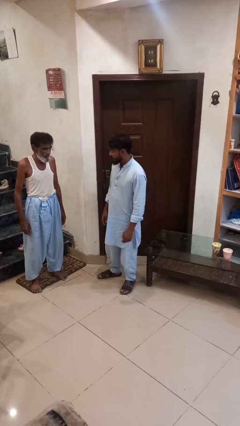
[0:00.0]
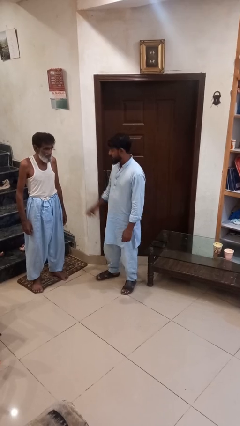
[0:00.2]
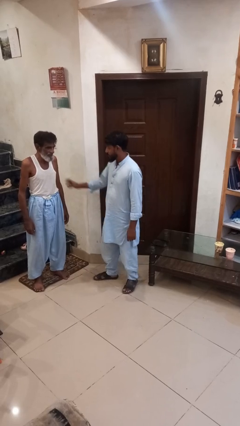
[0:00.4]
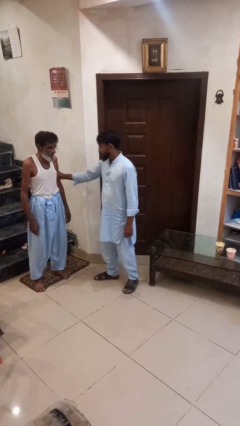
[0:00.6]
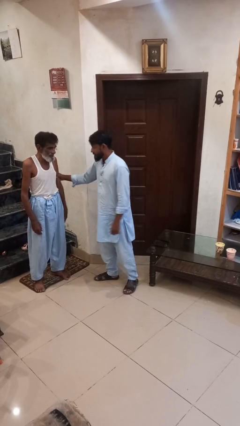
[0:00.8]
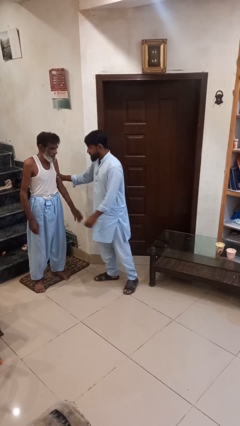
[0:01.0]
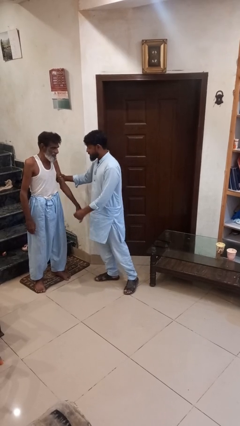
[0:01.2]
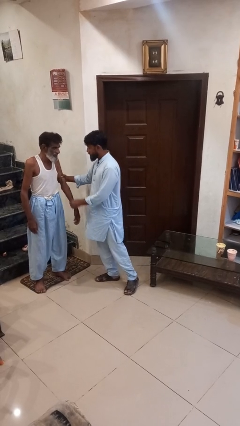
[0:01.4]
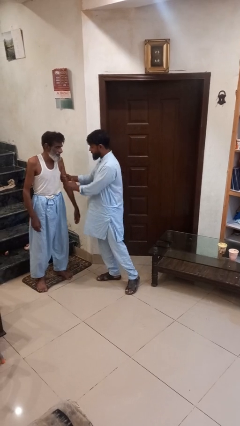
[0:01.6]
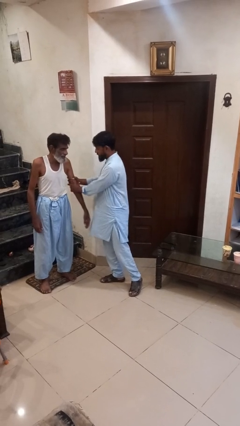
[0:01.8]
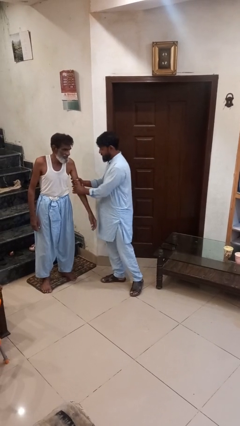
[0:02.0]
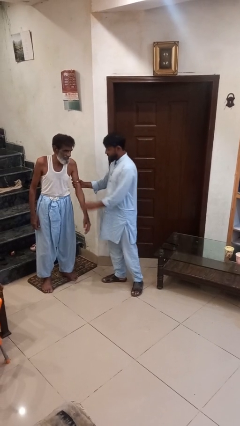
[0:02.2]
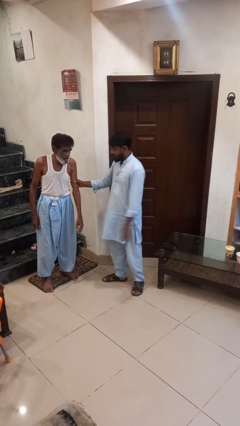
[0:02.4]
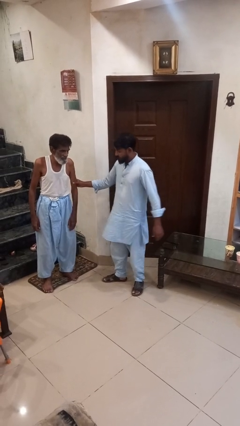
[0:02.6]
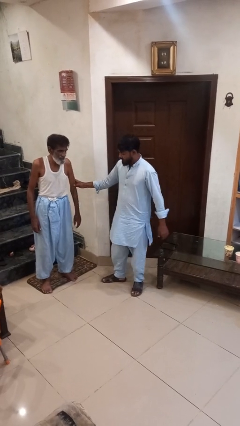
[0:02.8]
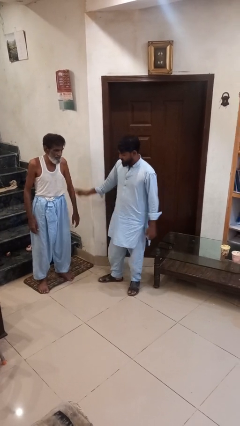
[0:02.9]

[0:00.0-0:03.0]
person grabs person by bicep

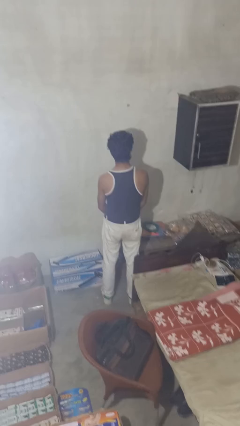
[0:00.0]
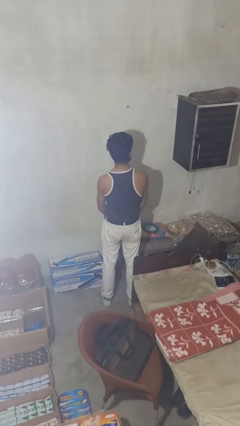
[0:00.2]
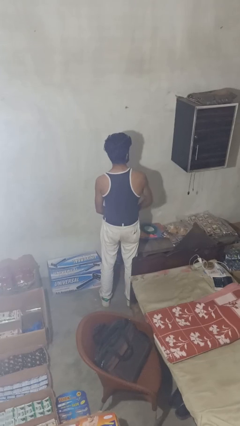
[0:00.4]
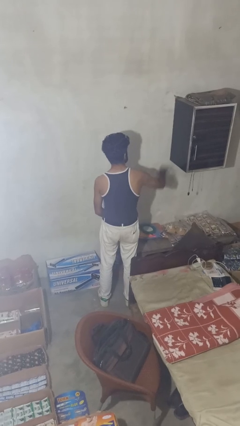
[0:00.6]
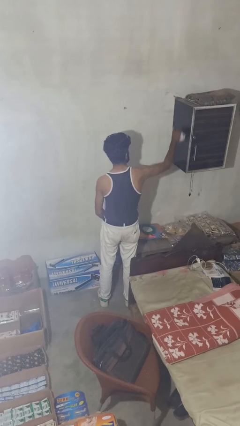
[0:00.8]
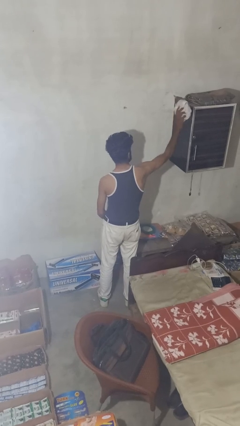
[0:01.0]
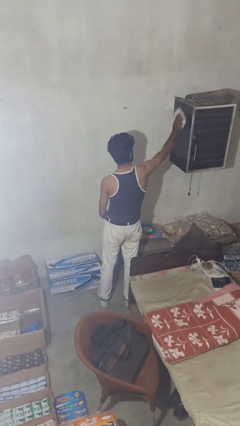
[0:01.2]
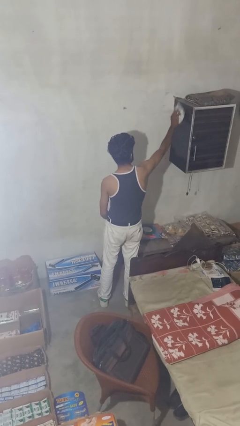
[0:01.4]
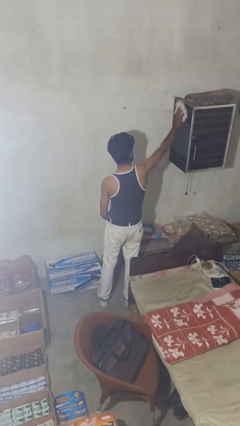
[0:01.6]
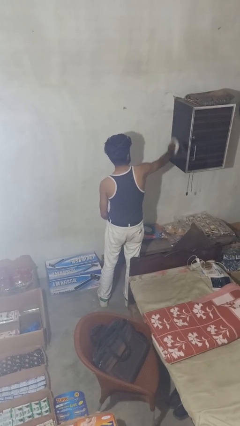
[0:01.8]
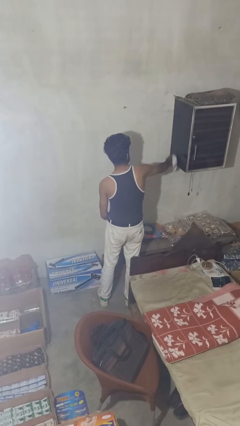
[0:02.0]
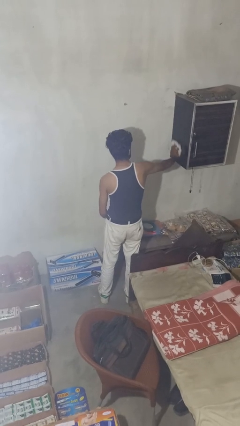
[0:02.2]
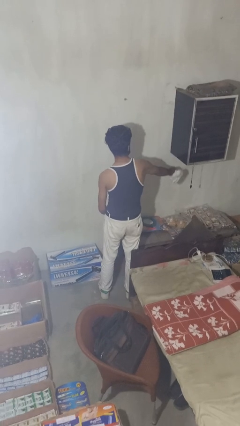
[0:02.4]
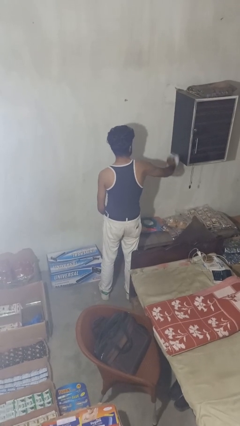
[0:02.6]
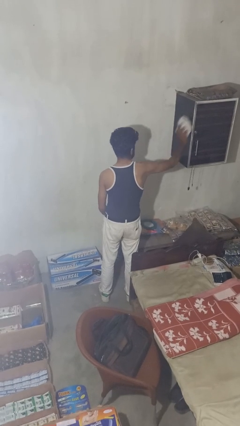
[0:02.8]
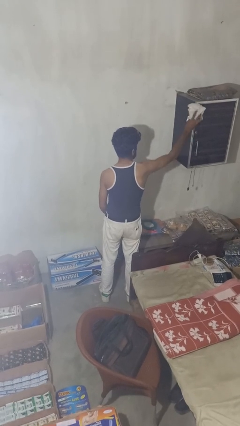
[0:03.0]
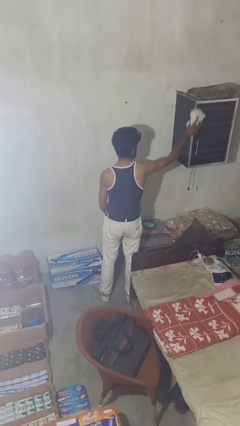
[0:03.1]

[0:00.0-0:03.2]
person dusts furniture

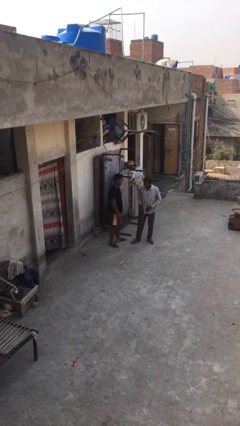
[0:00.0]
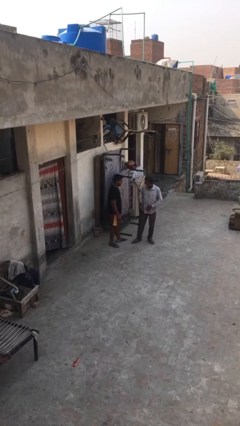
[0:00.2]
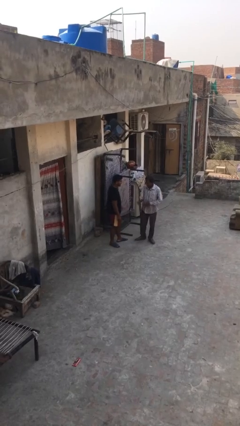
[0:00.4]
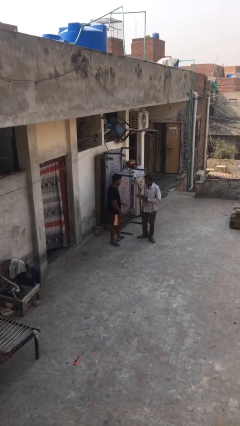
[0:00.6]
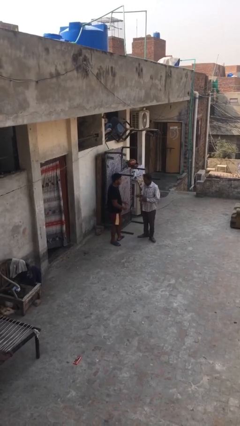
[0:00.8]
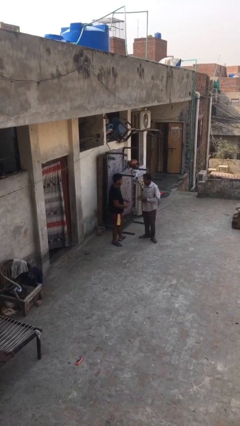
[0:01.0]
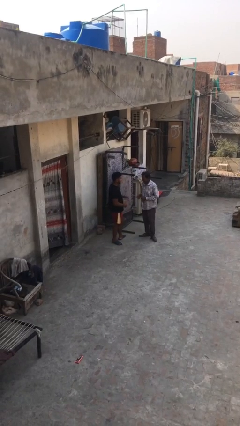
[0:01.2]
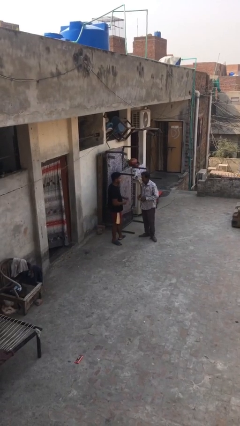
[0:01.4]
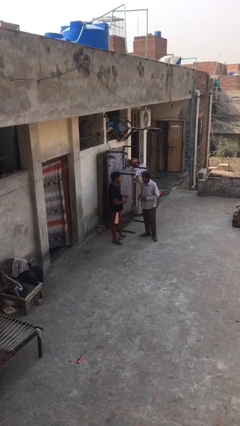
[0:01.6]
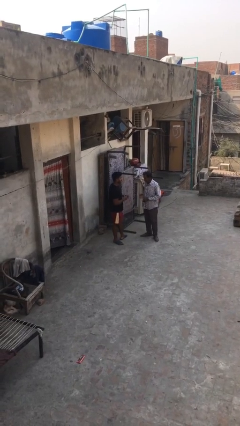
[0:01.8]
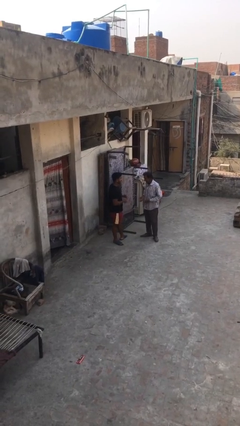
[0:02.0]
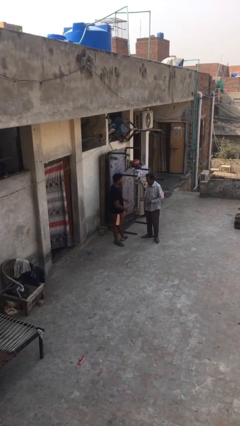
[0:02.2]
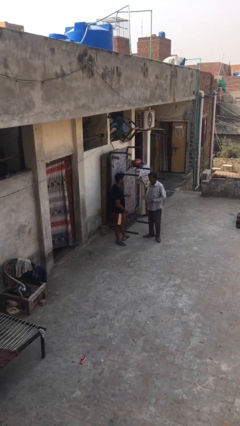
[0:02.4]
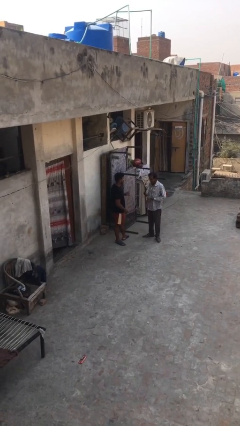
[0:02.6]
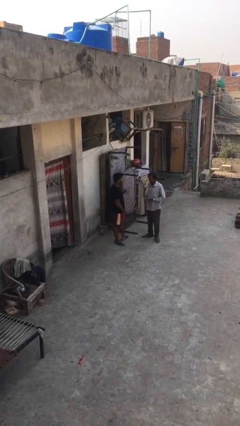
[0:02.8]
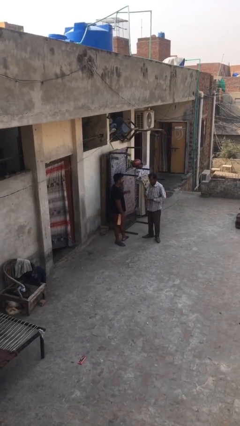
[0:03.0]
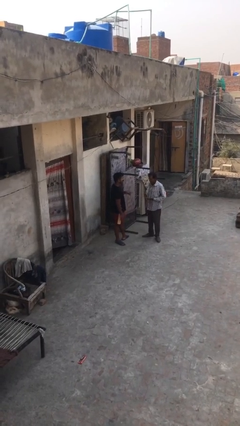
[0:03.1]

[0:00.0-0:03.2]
person talks to person

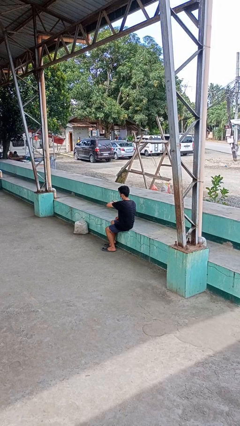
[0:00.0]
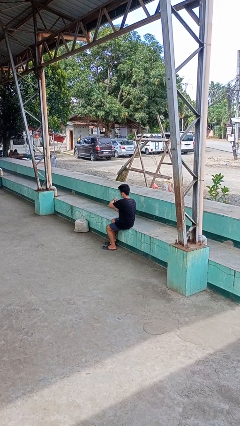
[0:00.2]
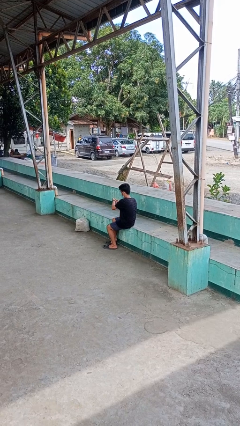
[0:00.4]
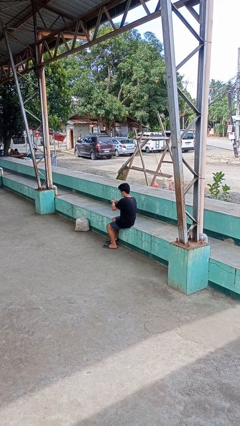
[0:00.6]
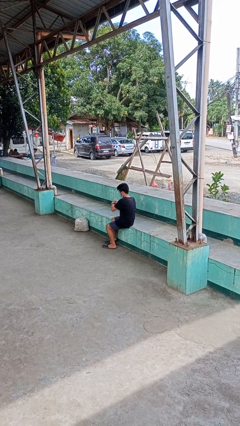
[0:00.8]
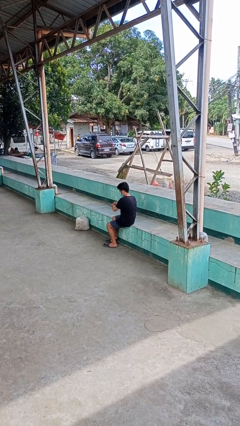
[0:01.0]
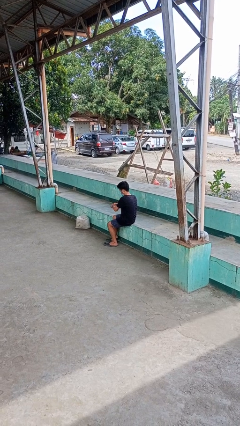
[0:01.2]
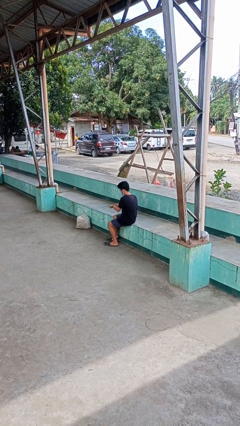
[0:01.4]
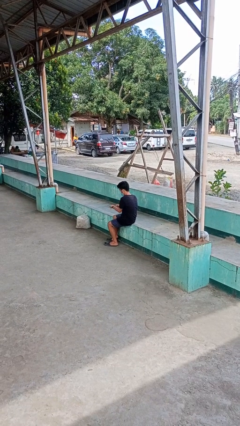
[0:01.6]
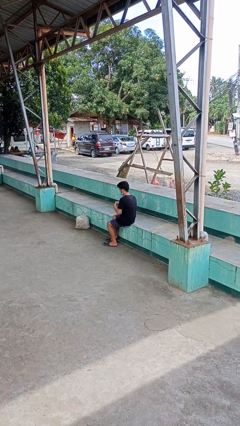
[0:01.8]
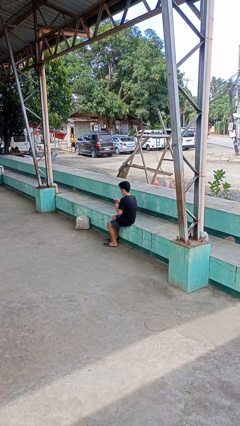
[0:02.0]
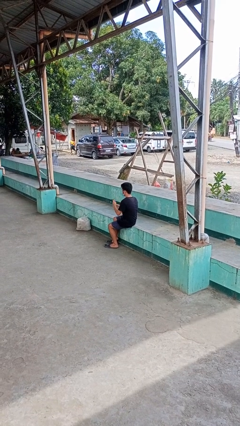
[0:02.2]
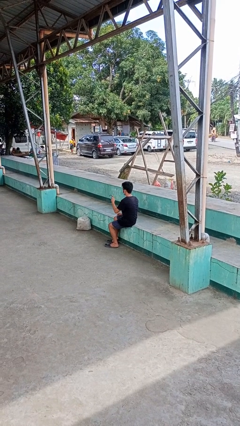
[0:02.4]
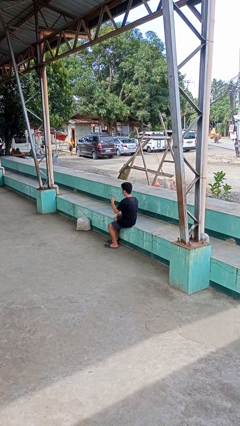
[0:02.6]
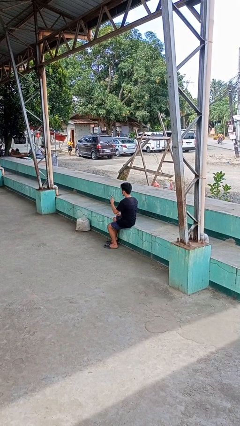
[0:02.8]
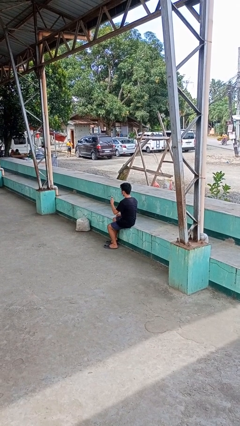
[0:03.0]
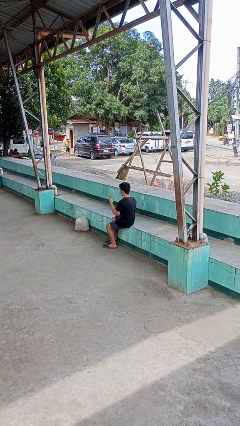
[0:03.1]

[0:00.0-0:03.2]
person takes off wristwatch

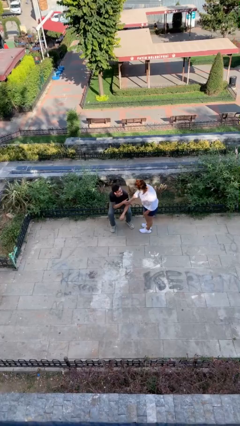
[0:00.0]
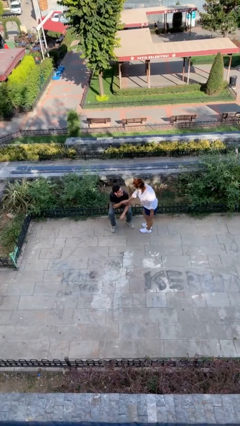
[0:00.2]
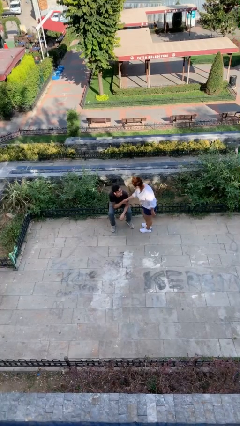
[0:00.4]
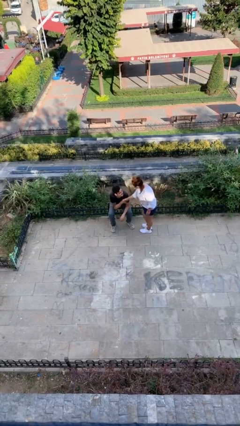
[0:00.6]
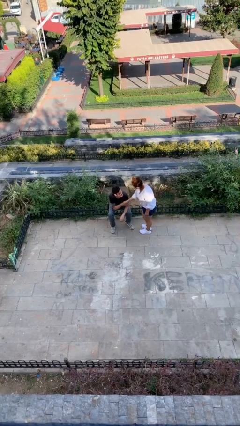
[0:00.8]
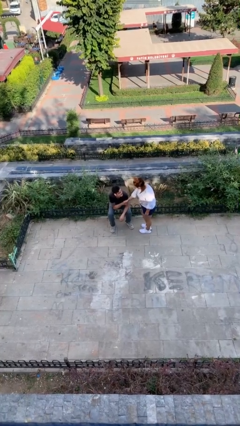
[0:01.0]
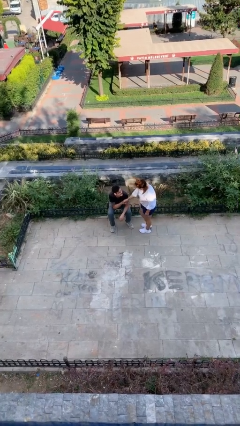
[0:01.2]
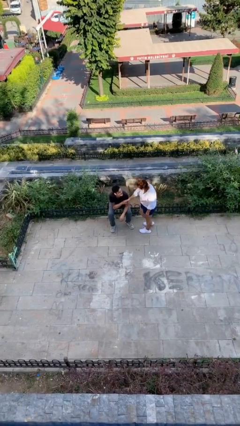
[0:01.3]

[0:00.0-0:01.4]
person shakes hand

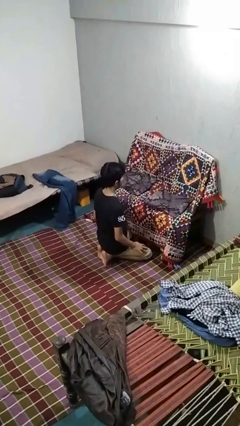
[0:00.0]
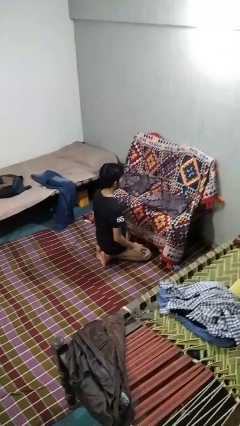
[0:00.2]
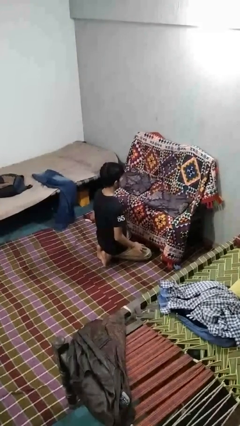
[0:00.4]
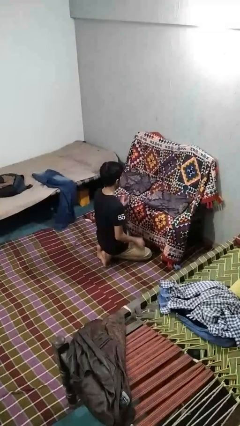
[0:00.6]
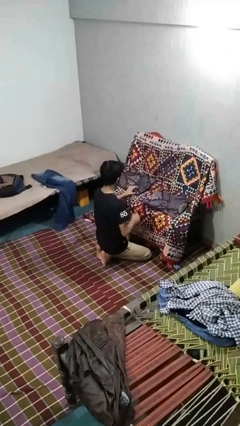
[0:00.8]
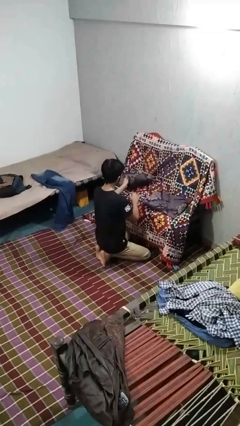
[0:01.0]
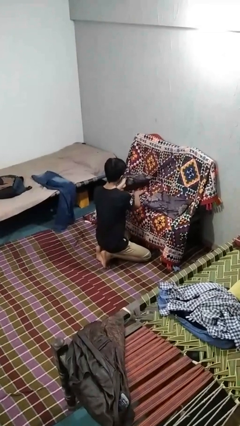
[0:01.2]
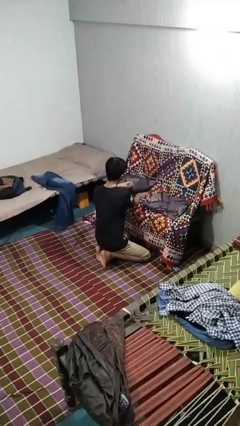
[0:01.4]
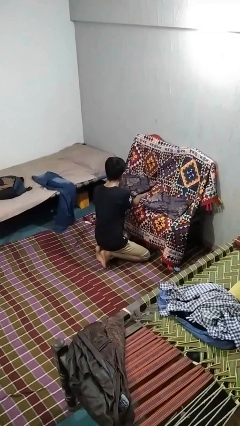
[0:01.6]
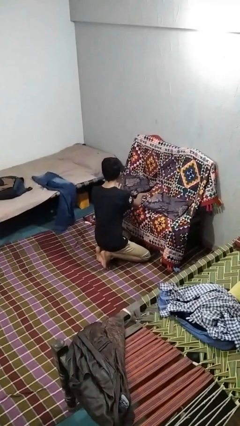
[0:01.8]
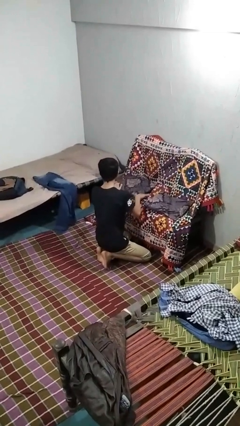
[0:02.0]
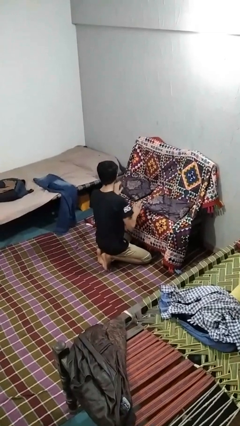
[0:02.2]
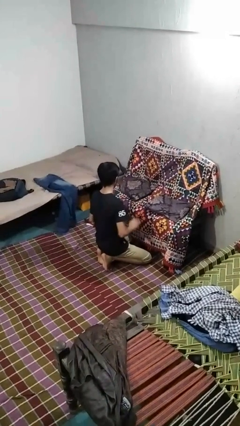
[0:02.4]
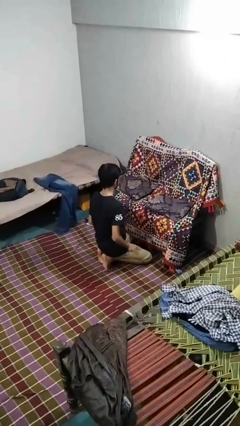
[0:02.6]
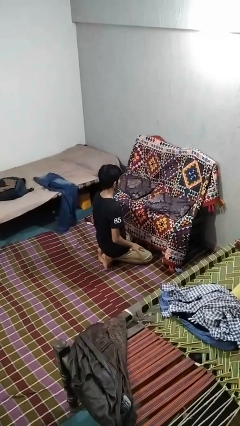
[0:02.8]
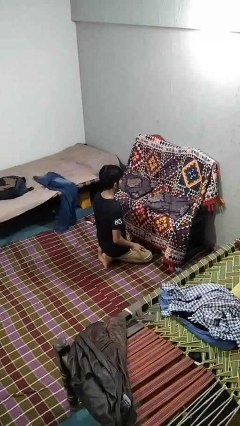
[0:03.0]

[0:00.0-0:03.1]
person searches in couch

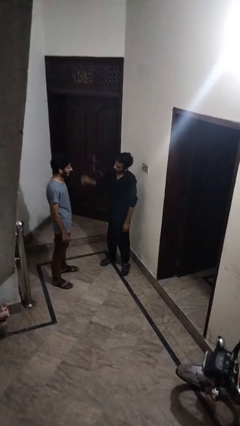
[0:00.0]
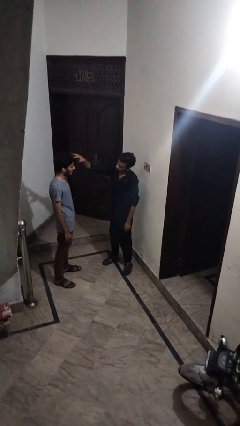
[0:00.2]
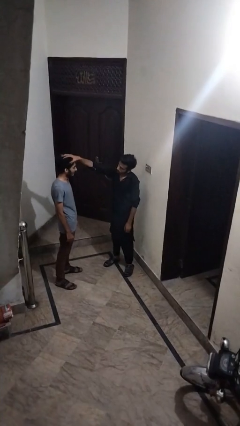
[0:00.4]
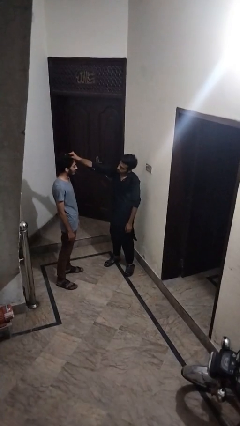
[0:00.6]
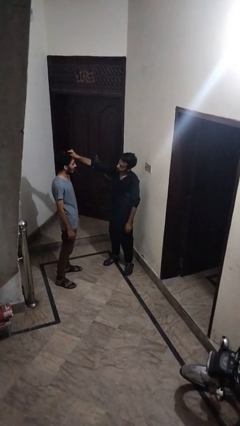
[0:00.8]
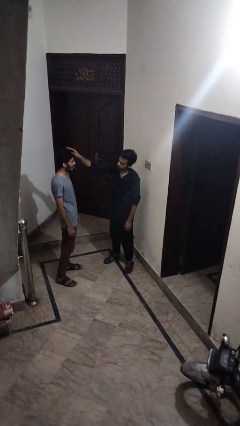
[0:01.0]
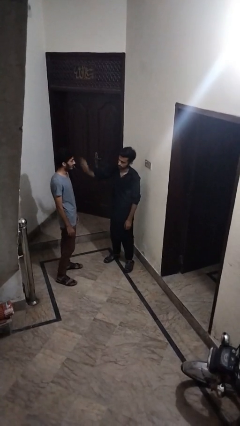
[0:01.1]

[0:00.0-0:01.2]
person grabs person by hair
